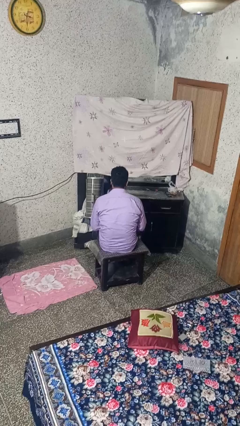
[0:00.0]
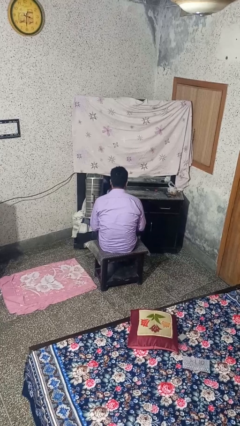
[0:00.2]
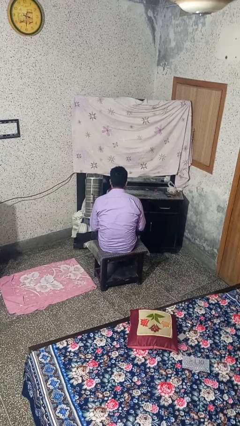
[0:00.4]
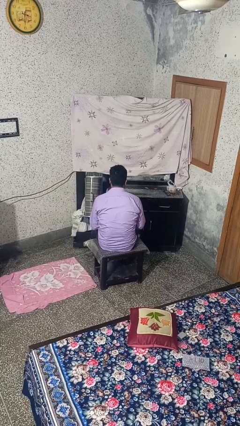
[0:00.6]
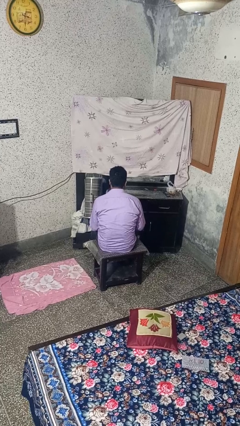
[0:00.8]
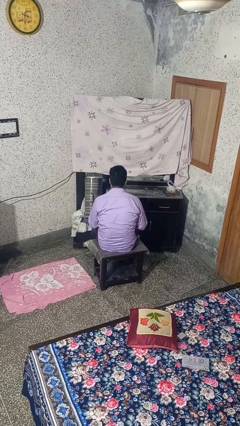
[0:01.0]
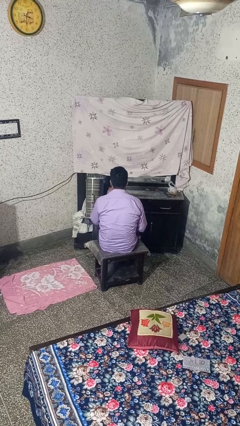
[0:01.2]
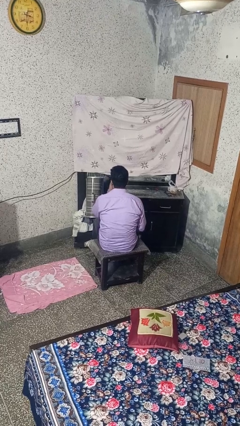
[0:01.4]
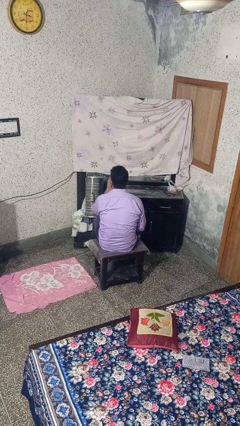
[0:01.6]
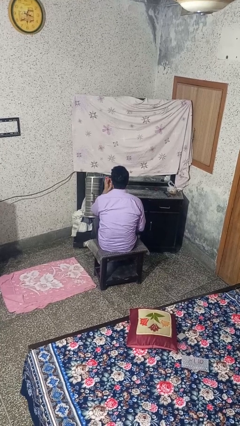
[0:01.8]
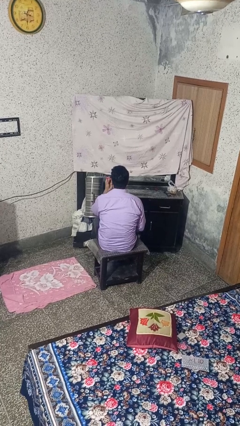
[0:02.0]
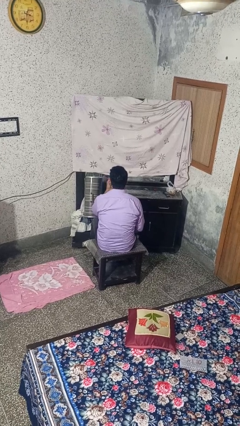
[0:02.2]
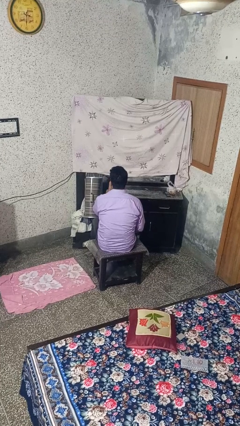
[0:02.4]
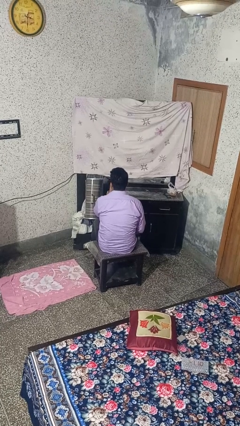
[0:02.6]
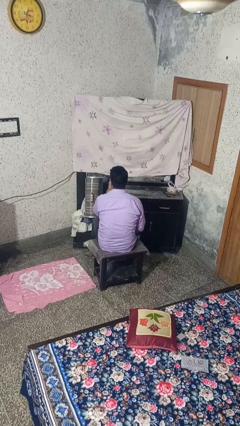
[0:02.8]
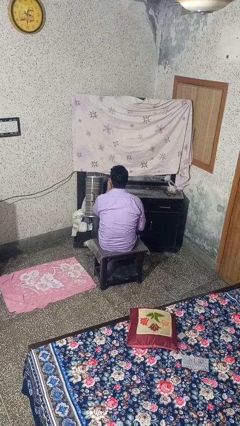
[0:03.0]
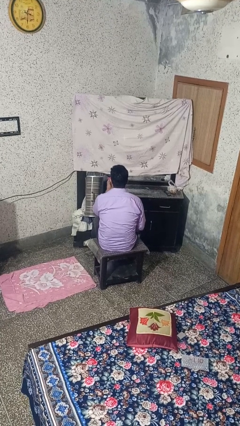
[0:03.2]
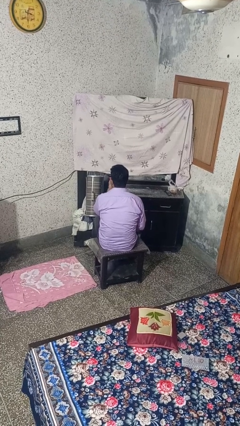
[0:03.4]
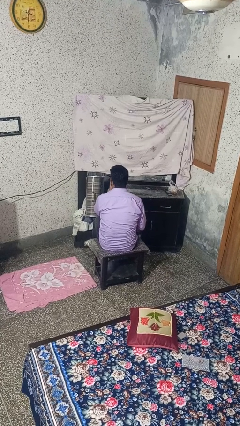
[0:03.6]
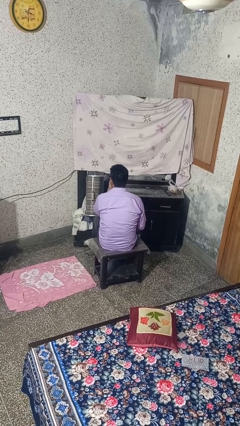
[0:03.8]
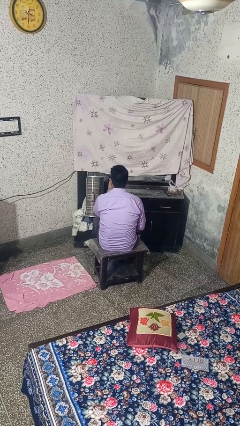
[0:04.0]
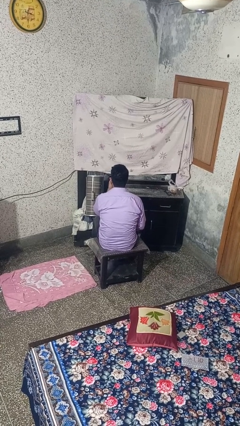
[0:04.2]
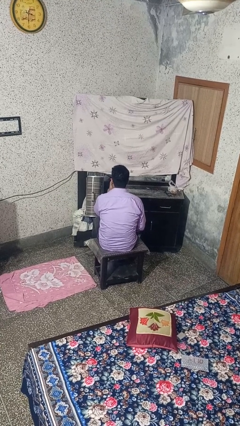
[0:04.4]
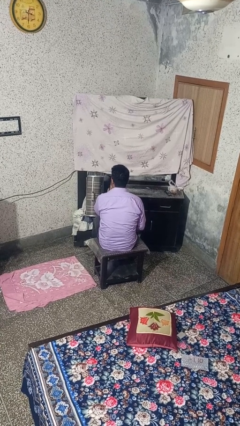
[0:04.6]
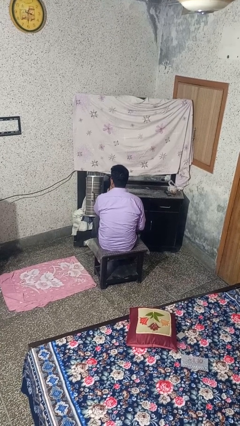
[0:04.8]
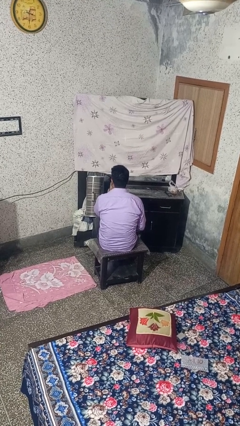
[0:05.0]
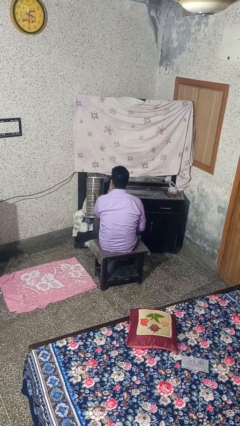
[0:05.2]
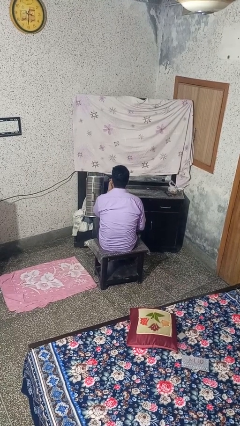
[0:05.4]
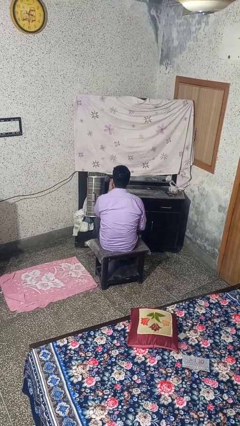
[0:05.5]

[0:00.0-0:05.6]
person applies lip makeup

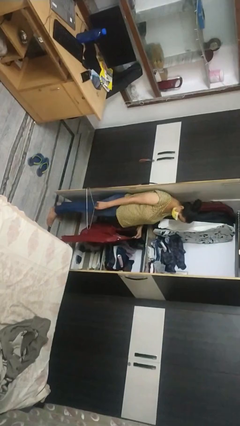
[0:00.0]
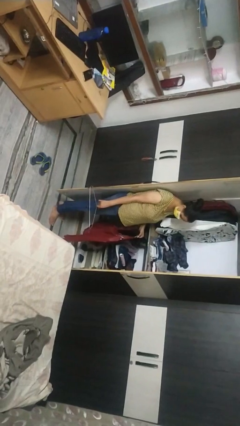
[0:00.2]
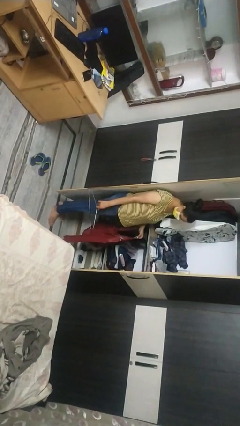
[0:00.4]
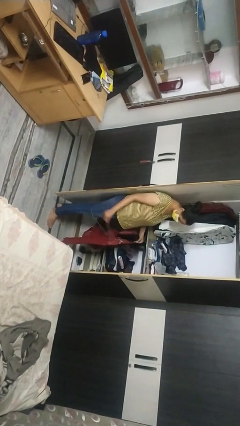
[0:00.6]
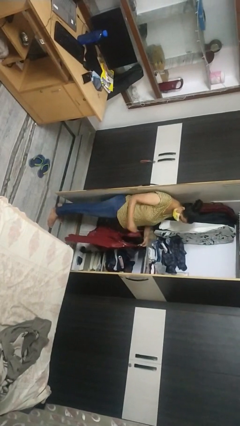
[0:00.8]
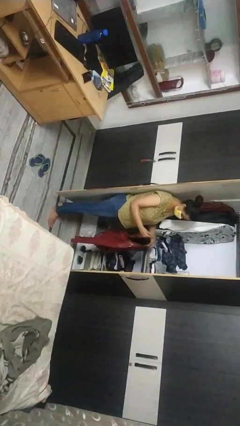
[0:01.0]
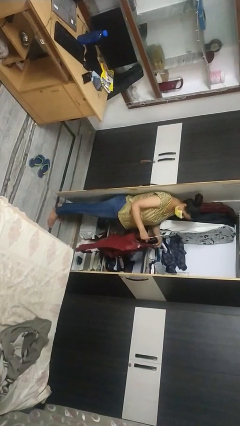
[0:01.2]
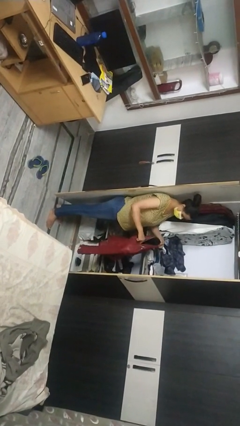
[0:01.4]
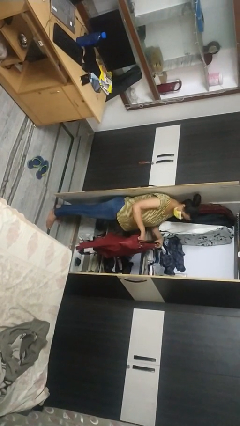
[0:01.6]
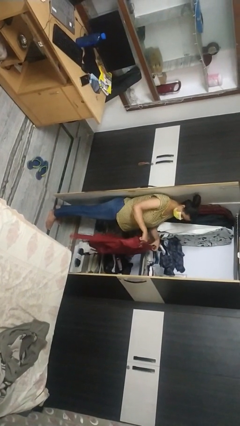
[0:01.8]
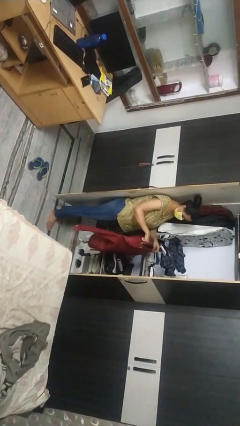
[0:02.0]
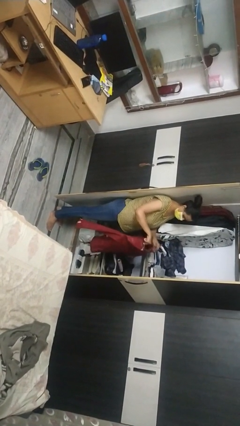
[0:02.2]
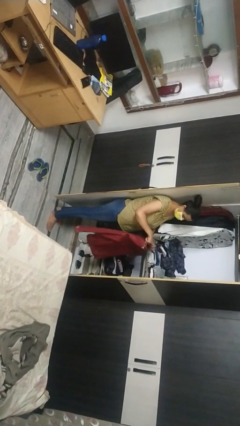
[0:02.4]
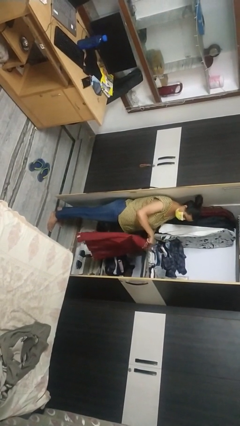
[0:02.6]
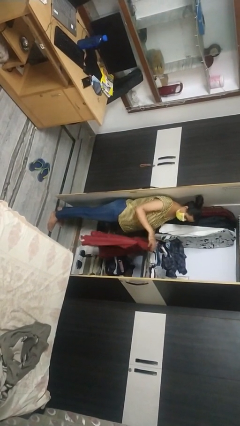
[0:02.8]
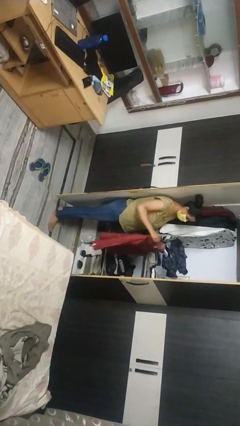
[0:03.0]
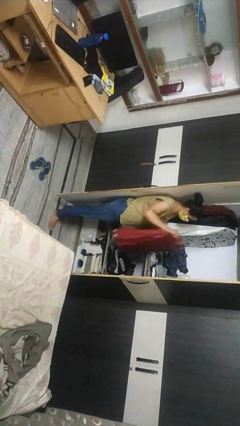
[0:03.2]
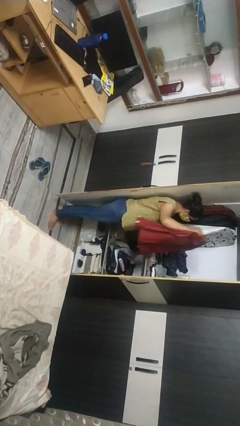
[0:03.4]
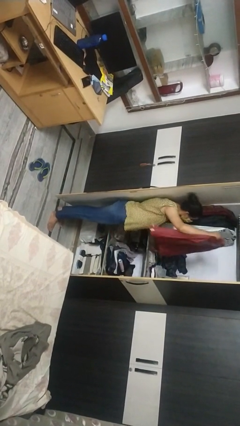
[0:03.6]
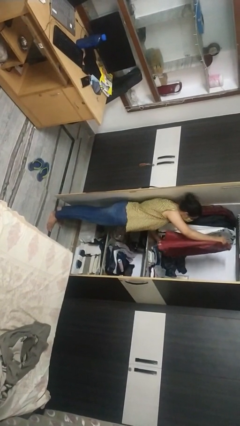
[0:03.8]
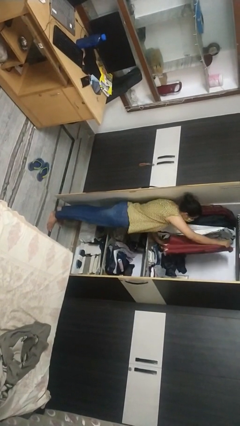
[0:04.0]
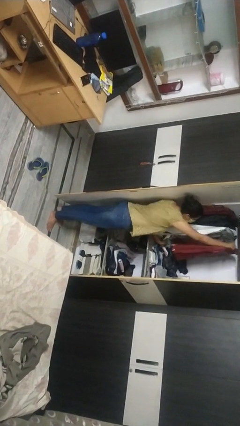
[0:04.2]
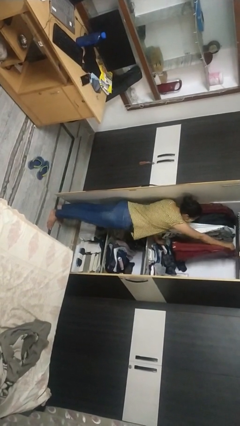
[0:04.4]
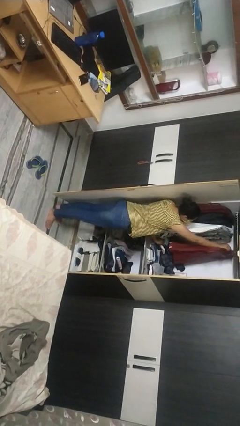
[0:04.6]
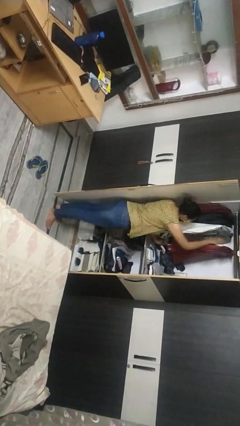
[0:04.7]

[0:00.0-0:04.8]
person puts clothes into closet

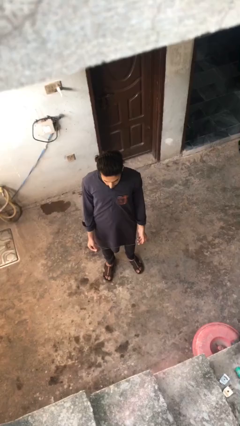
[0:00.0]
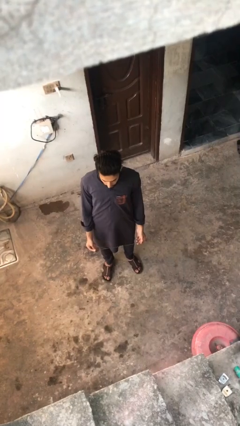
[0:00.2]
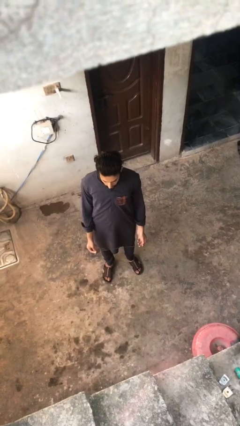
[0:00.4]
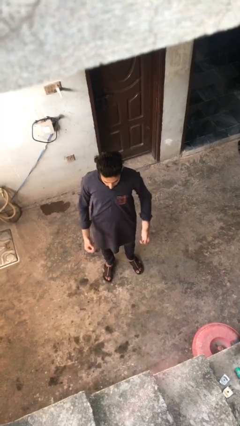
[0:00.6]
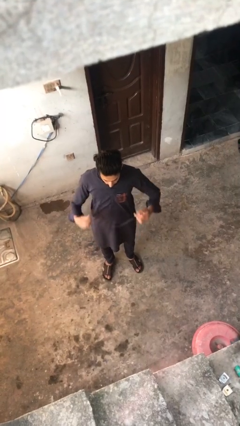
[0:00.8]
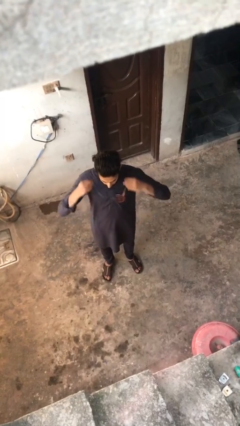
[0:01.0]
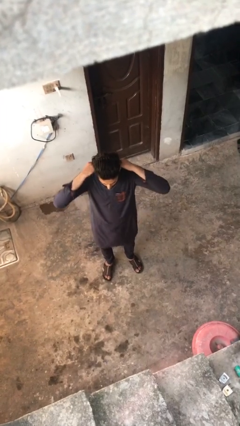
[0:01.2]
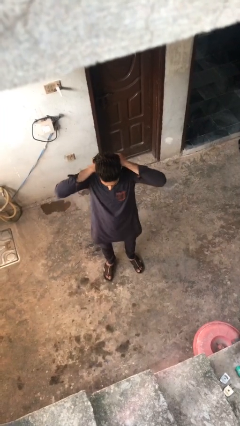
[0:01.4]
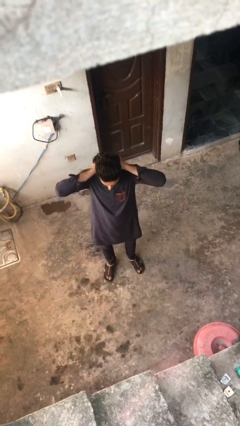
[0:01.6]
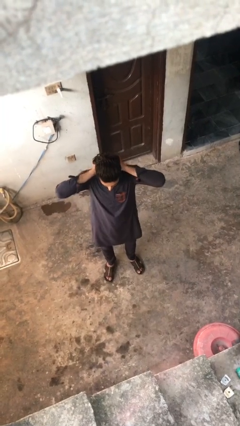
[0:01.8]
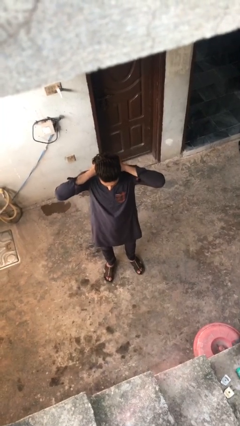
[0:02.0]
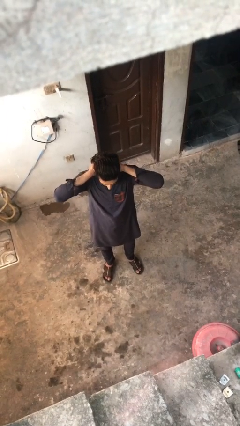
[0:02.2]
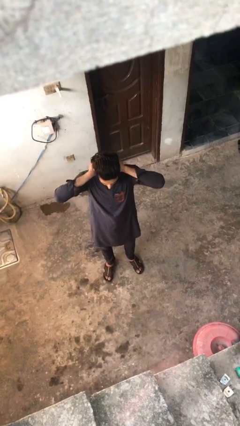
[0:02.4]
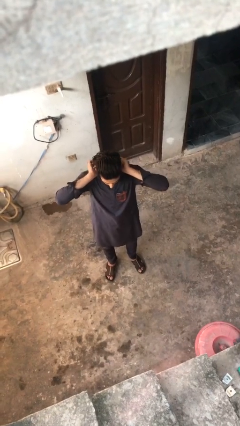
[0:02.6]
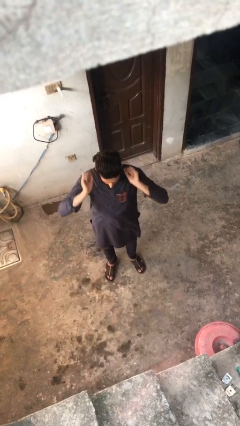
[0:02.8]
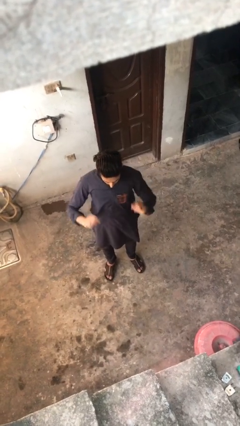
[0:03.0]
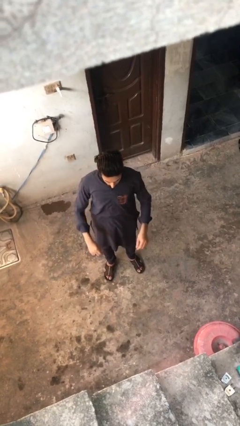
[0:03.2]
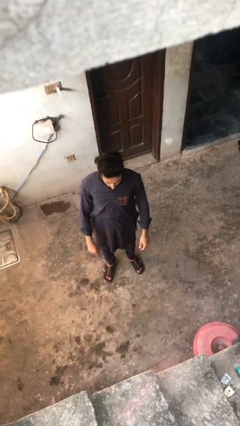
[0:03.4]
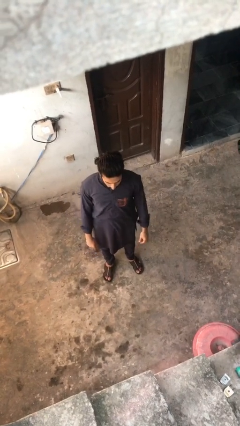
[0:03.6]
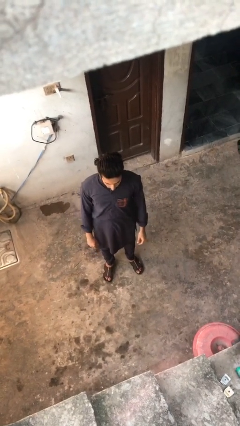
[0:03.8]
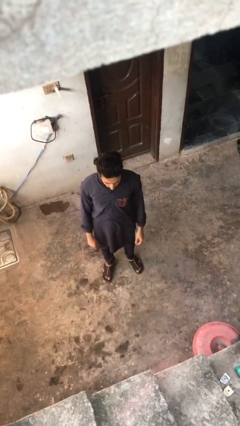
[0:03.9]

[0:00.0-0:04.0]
person puts on necklace

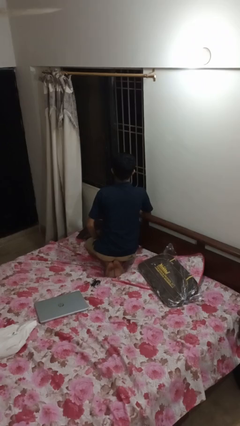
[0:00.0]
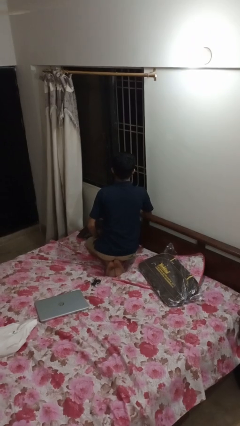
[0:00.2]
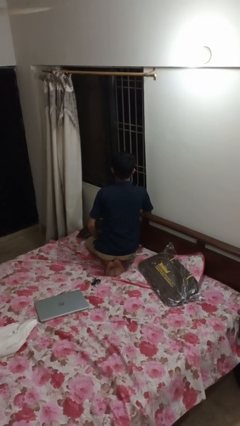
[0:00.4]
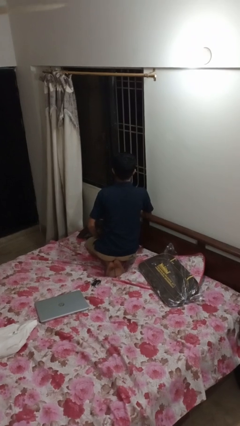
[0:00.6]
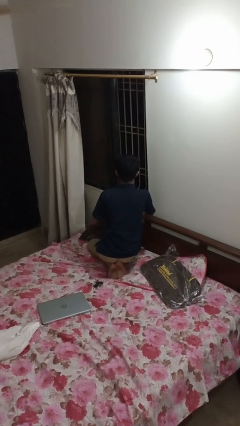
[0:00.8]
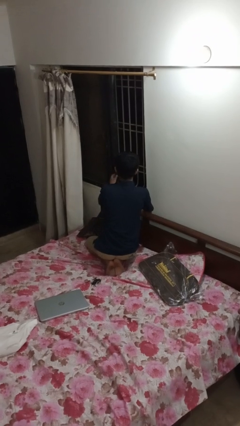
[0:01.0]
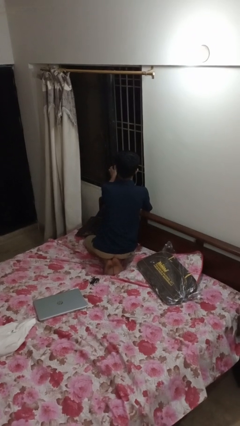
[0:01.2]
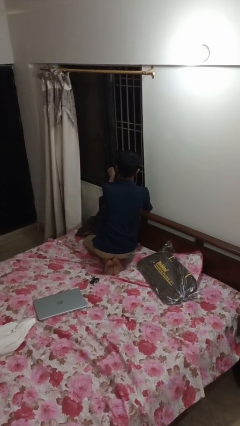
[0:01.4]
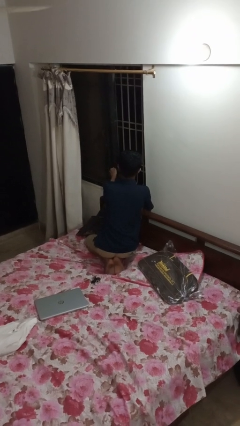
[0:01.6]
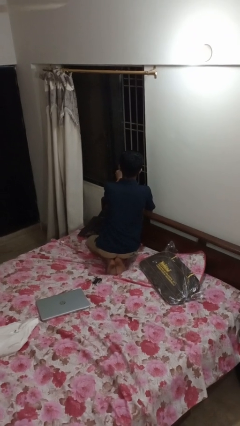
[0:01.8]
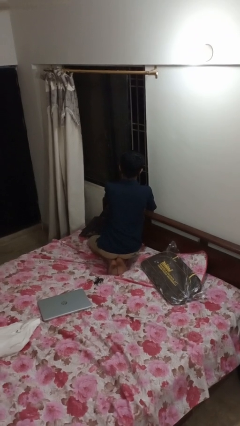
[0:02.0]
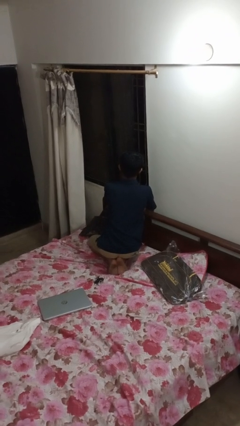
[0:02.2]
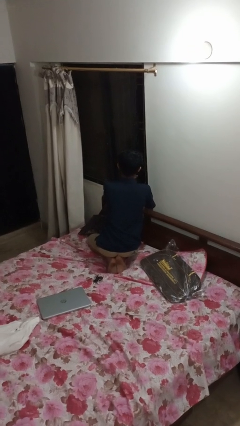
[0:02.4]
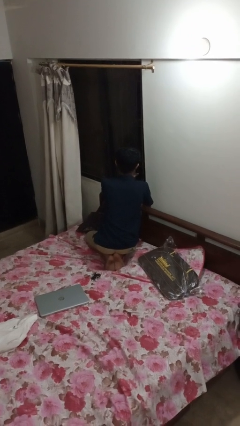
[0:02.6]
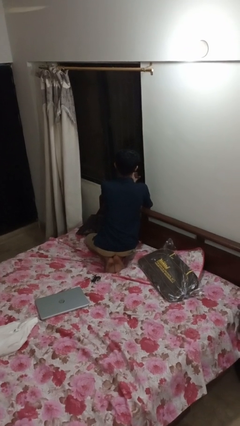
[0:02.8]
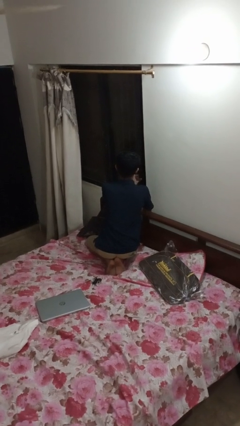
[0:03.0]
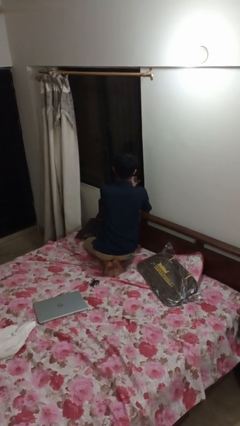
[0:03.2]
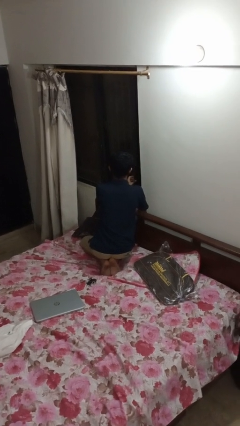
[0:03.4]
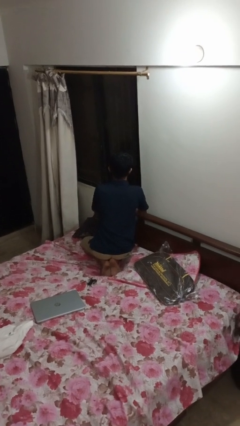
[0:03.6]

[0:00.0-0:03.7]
person closes home window
